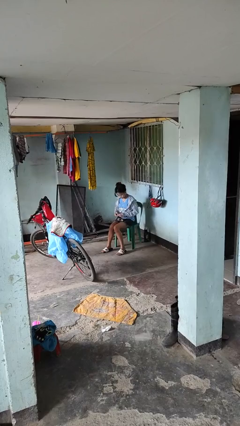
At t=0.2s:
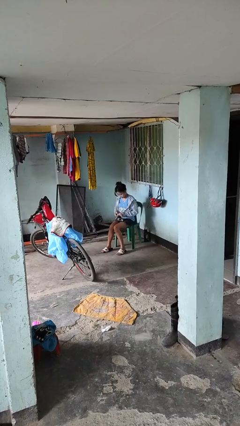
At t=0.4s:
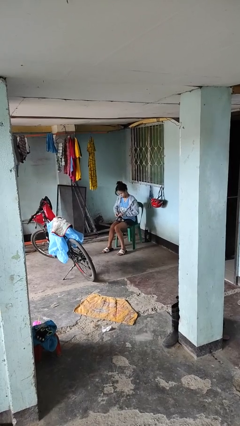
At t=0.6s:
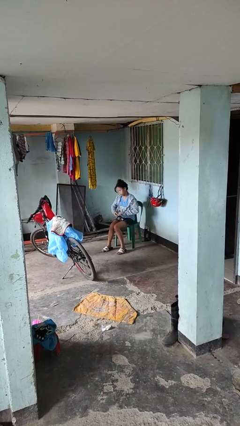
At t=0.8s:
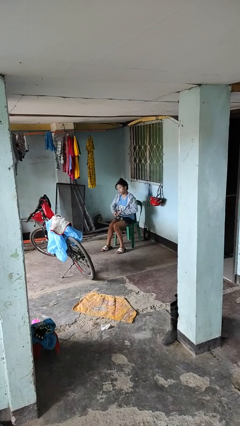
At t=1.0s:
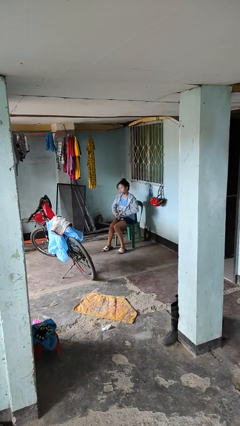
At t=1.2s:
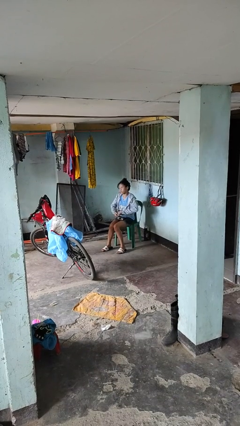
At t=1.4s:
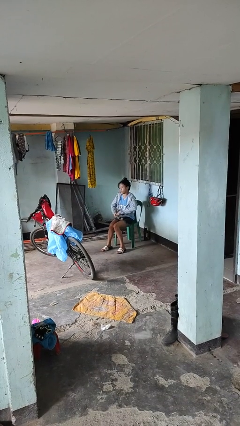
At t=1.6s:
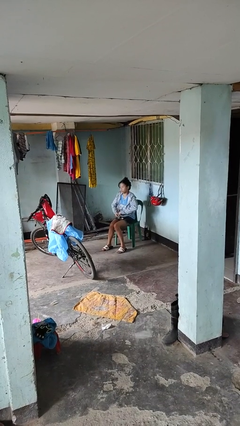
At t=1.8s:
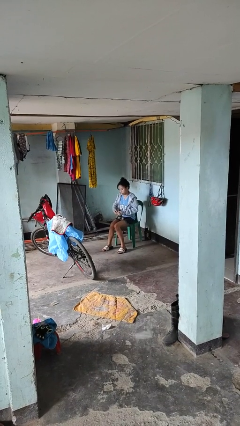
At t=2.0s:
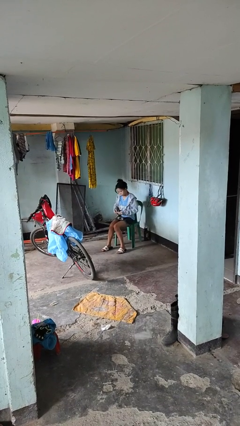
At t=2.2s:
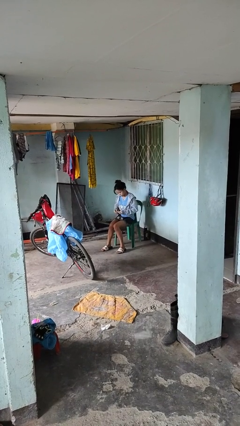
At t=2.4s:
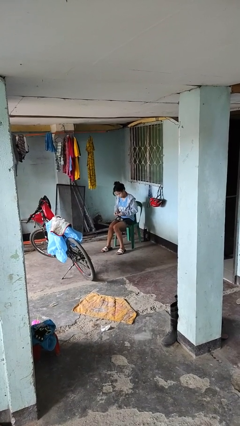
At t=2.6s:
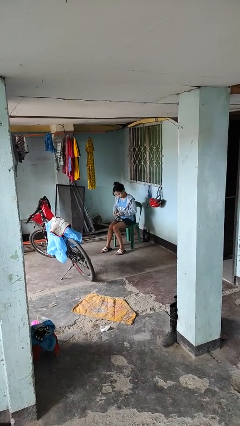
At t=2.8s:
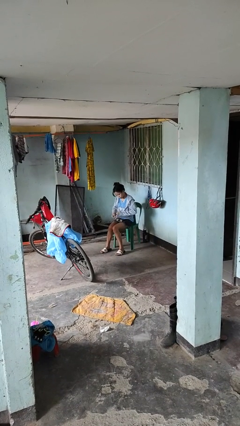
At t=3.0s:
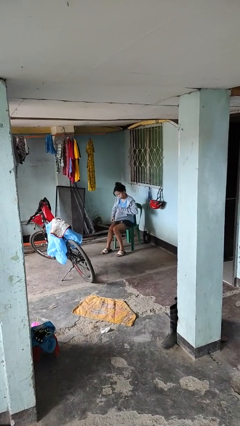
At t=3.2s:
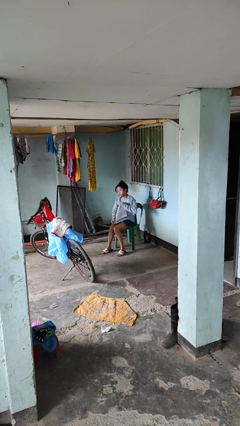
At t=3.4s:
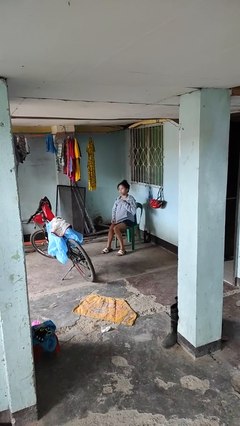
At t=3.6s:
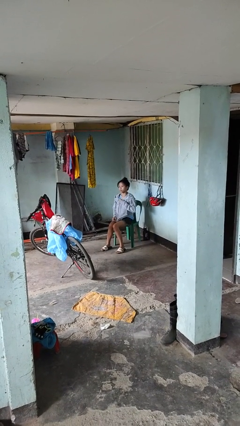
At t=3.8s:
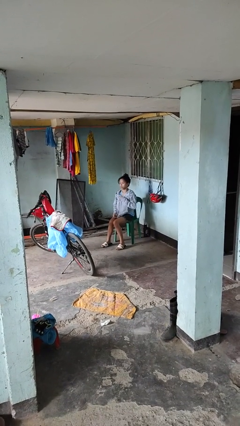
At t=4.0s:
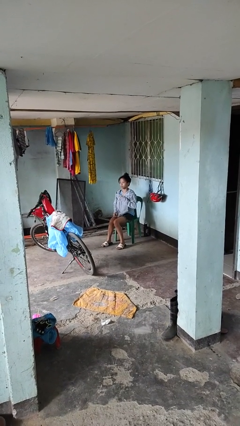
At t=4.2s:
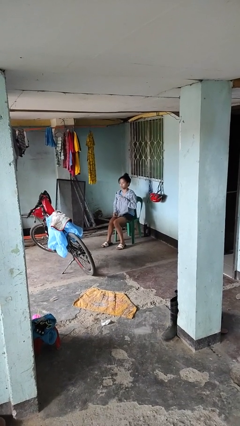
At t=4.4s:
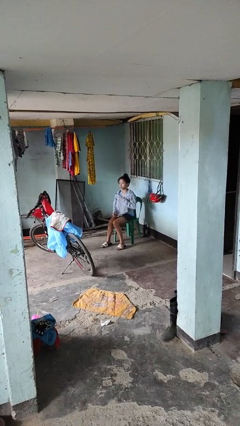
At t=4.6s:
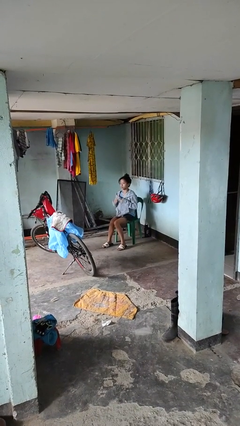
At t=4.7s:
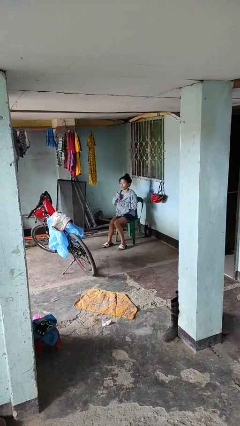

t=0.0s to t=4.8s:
person zips up jacket

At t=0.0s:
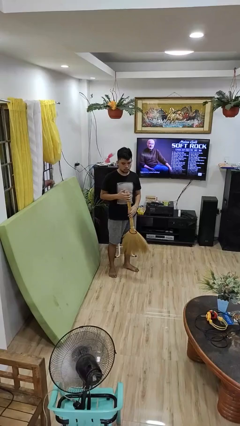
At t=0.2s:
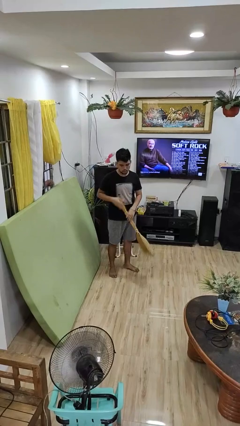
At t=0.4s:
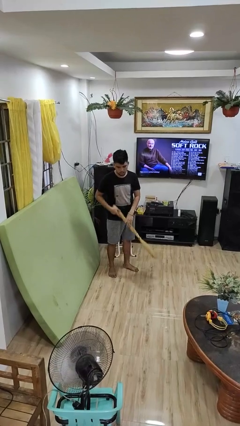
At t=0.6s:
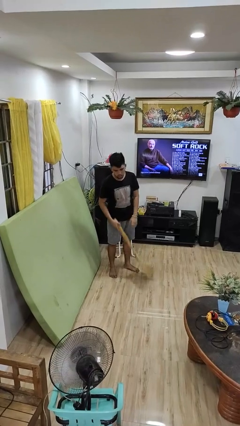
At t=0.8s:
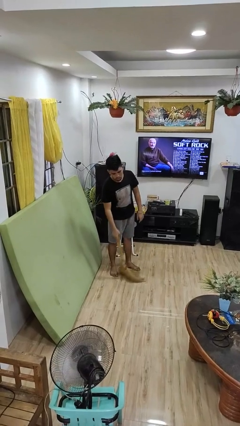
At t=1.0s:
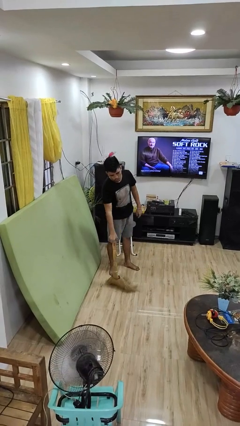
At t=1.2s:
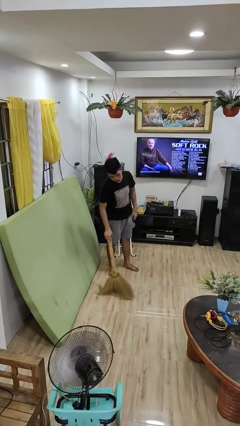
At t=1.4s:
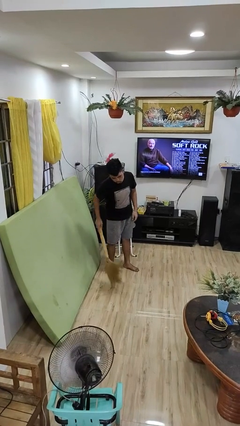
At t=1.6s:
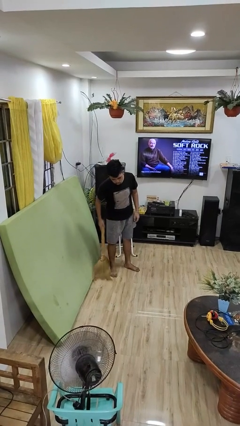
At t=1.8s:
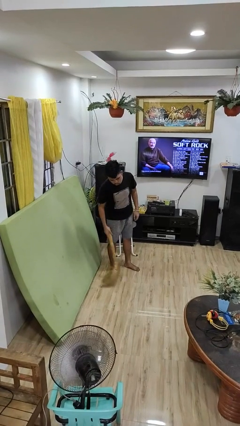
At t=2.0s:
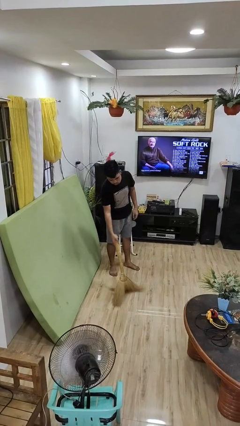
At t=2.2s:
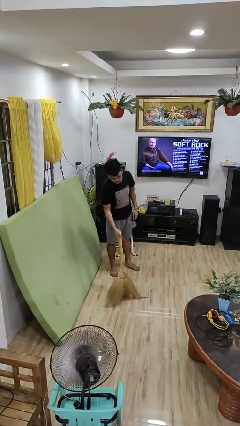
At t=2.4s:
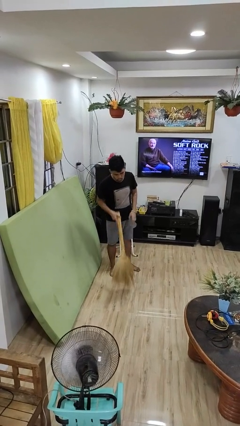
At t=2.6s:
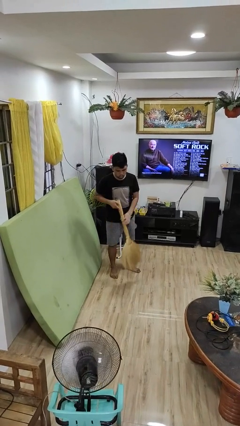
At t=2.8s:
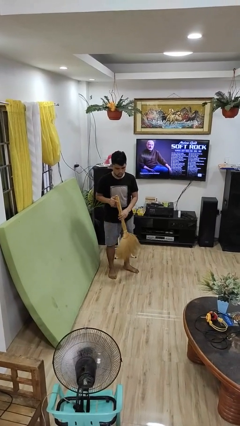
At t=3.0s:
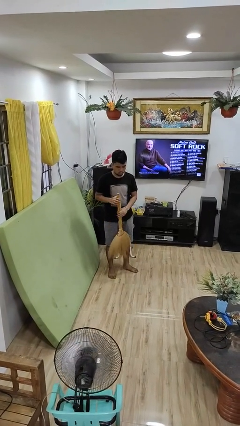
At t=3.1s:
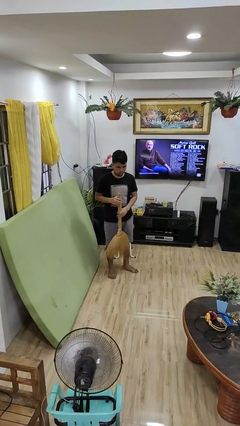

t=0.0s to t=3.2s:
person sweeps floor

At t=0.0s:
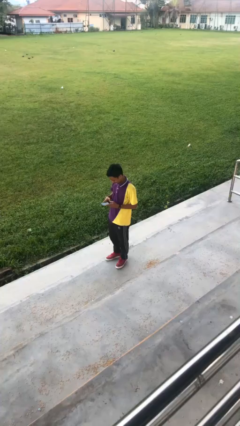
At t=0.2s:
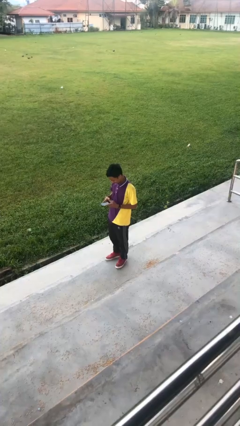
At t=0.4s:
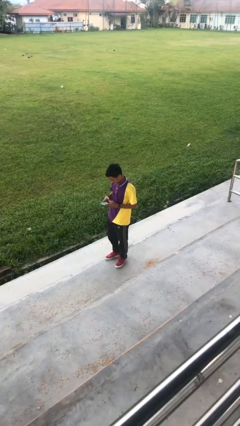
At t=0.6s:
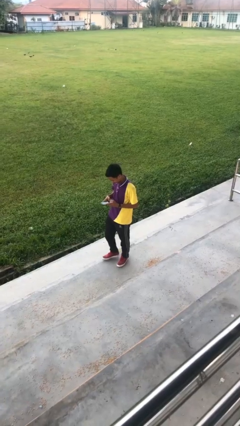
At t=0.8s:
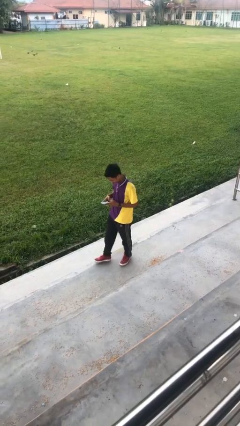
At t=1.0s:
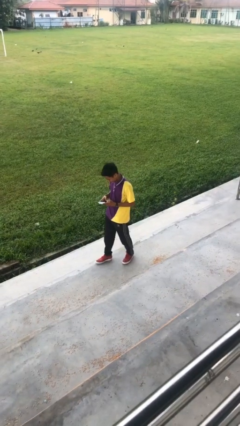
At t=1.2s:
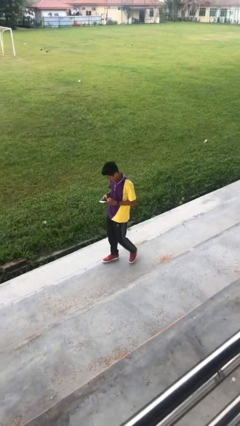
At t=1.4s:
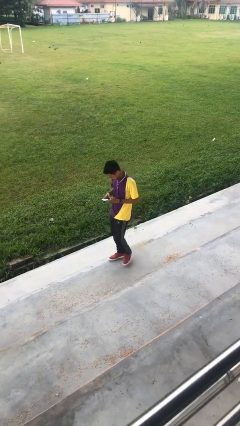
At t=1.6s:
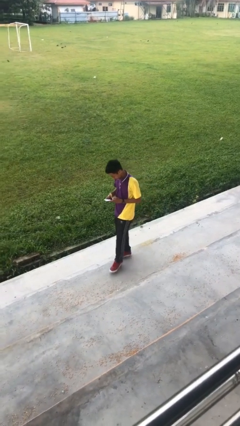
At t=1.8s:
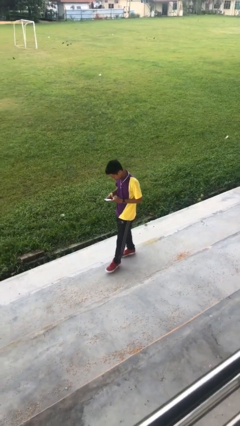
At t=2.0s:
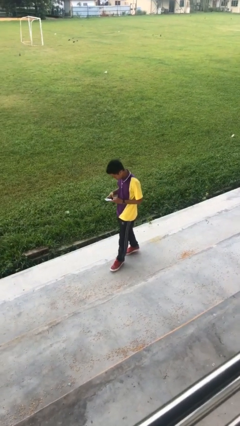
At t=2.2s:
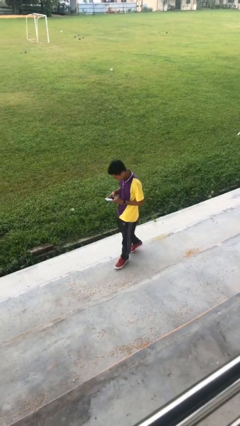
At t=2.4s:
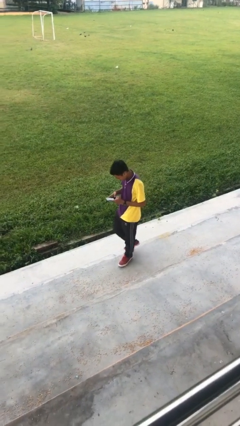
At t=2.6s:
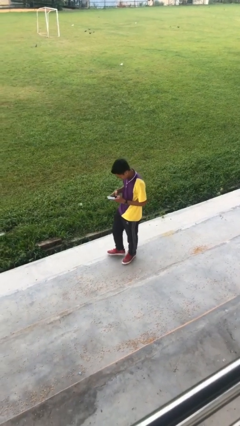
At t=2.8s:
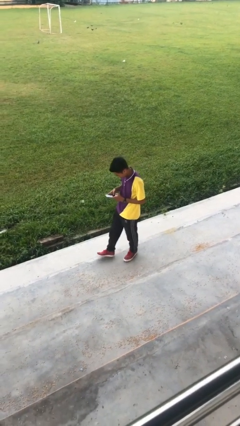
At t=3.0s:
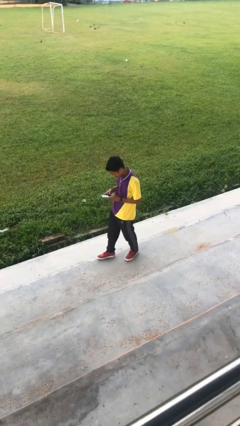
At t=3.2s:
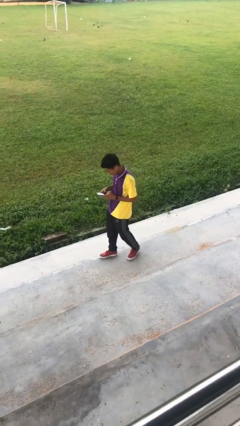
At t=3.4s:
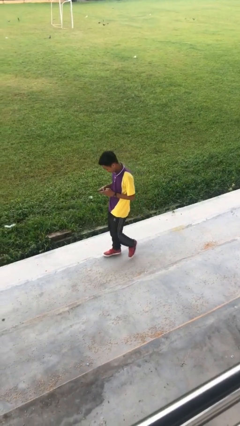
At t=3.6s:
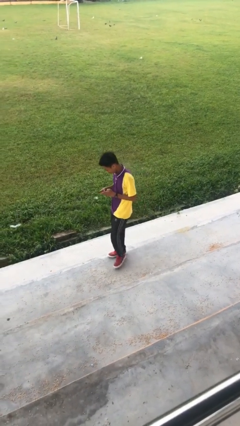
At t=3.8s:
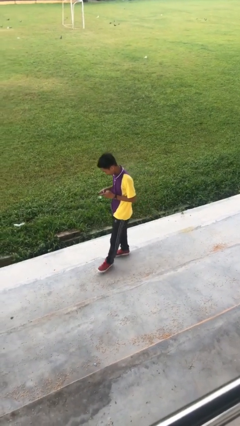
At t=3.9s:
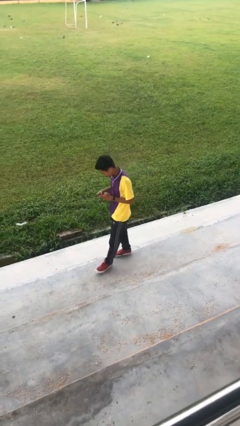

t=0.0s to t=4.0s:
person texts on phone

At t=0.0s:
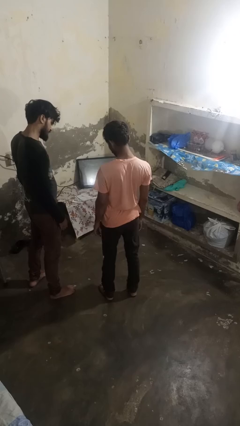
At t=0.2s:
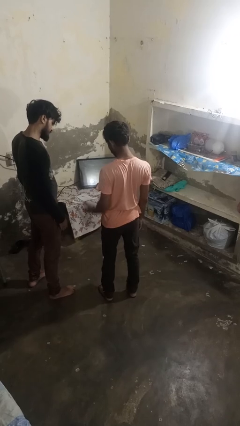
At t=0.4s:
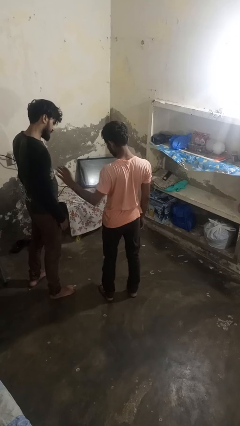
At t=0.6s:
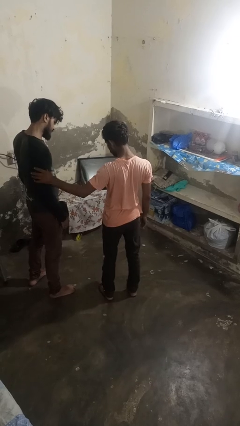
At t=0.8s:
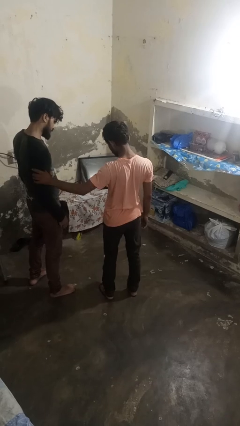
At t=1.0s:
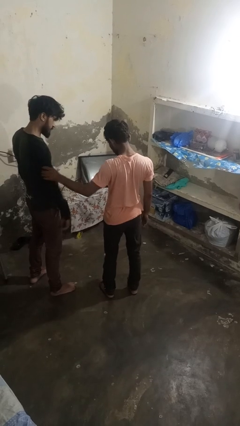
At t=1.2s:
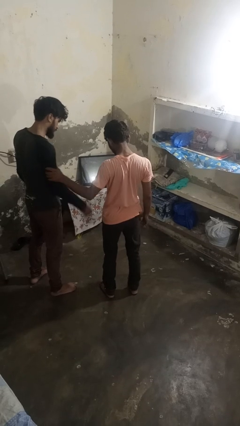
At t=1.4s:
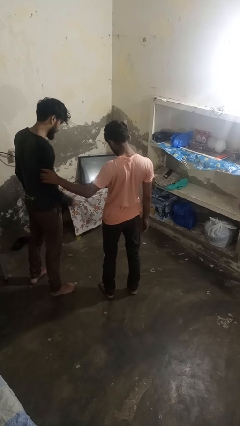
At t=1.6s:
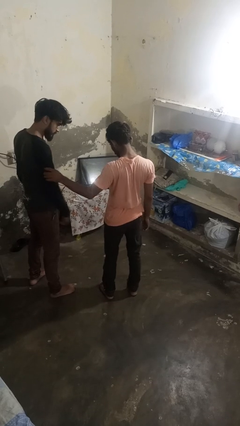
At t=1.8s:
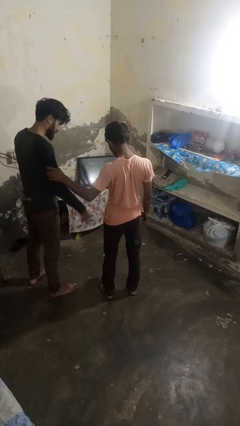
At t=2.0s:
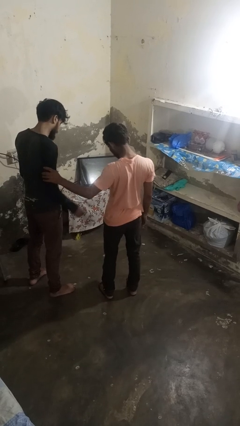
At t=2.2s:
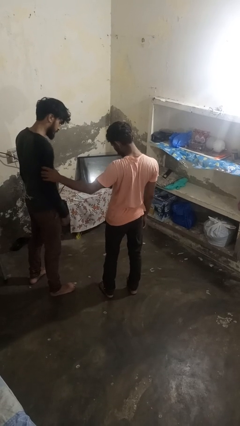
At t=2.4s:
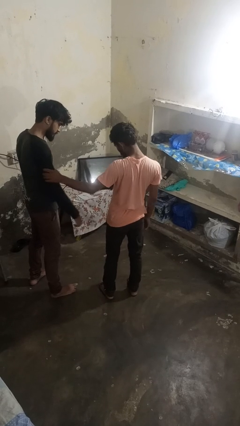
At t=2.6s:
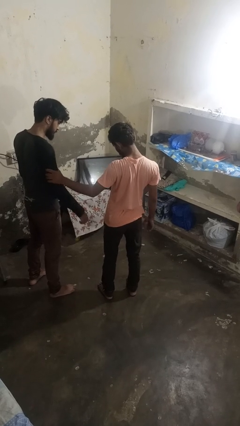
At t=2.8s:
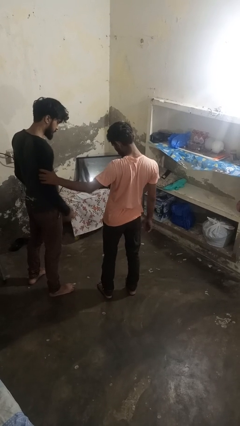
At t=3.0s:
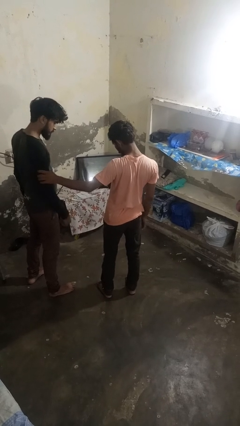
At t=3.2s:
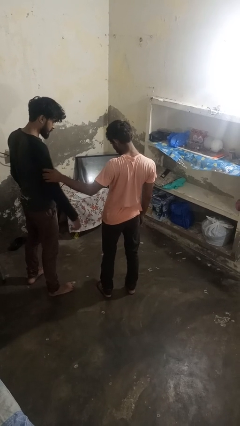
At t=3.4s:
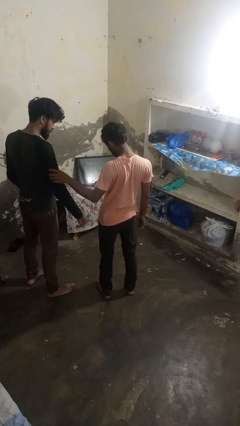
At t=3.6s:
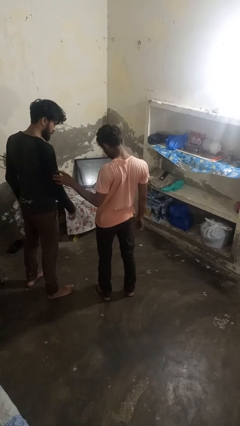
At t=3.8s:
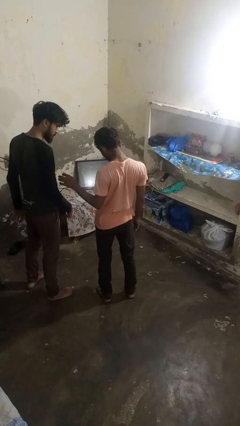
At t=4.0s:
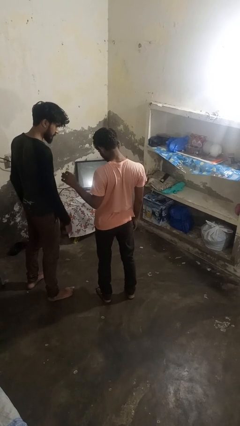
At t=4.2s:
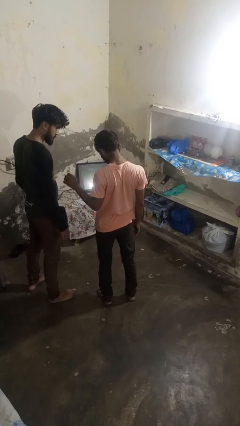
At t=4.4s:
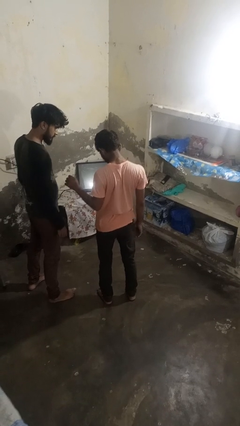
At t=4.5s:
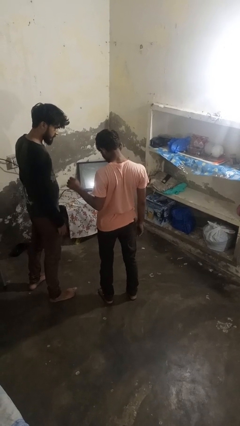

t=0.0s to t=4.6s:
person grabs person by bicep

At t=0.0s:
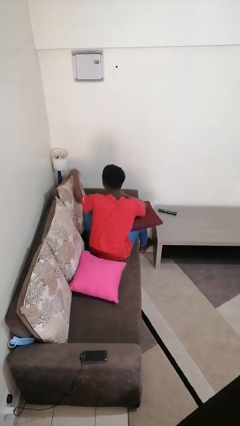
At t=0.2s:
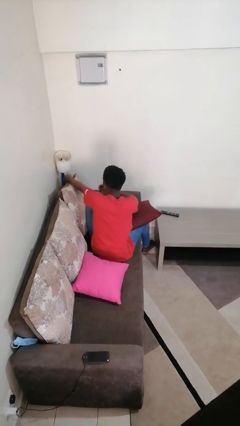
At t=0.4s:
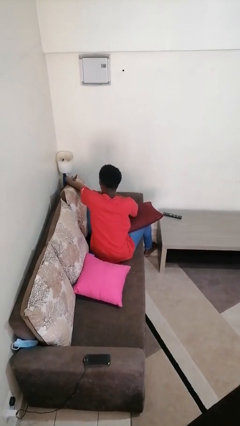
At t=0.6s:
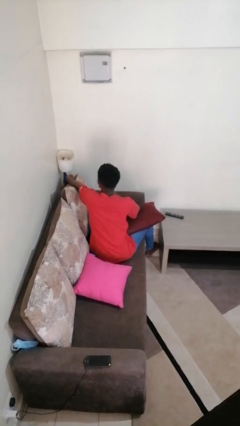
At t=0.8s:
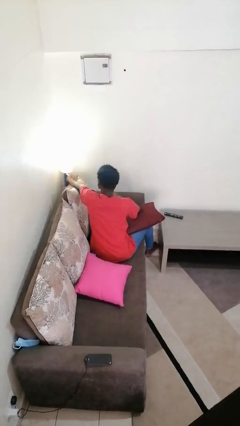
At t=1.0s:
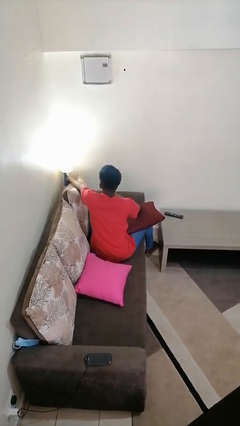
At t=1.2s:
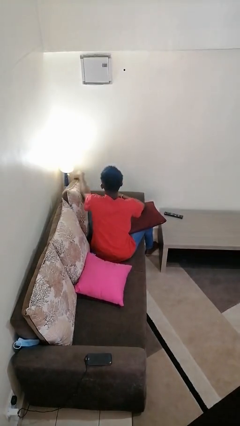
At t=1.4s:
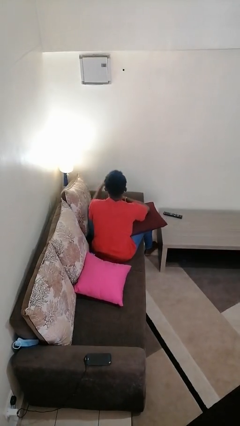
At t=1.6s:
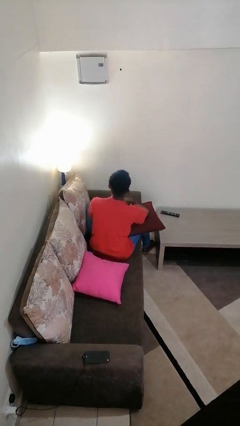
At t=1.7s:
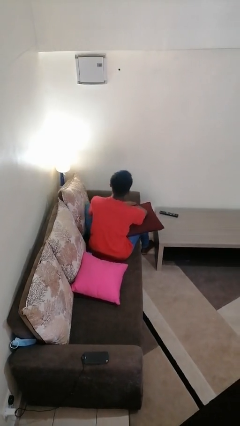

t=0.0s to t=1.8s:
person turns on lamp
